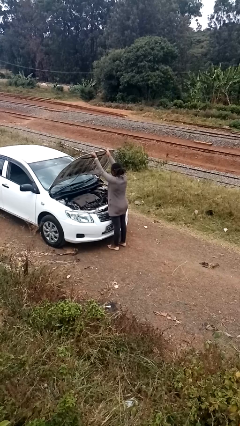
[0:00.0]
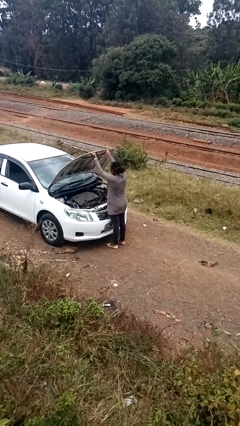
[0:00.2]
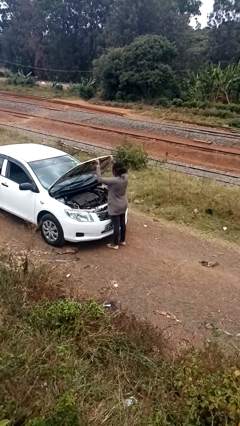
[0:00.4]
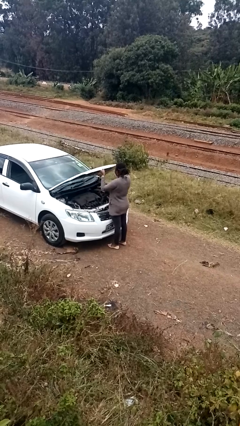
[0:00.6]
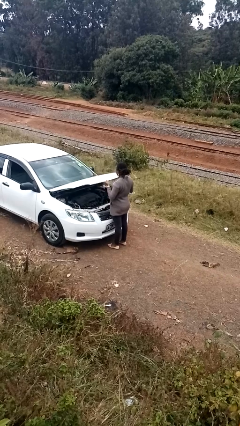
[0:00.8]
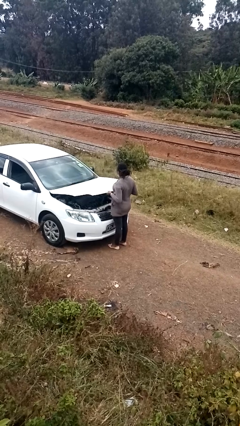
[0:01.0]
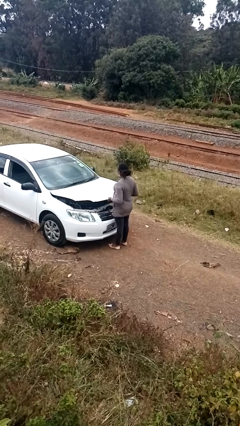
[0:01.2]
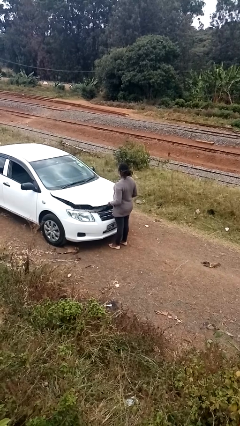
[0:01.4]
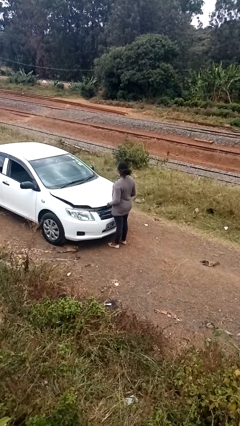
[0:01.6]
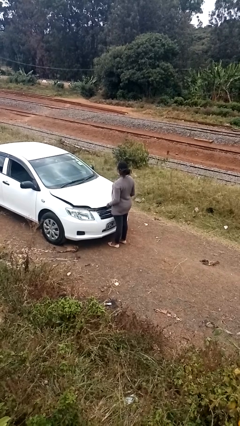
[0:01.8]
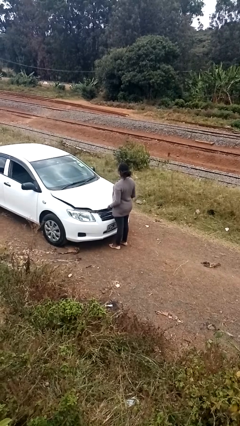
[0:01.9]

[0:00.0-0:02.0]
person closes car hood

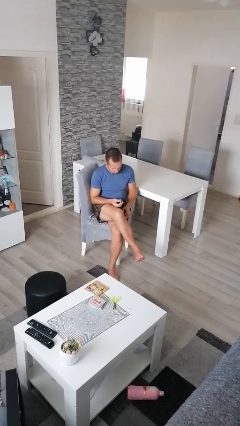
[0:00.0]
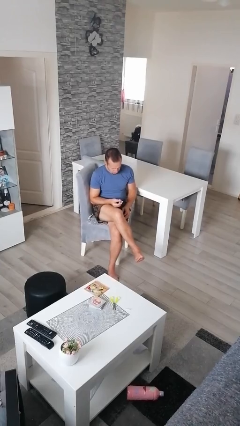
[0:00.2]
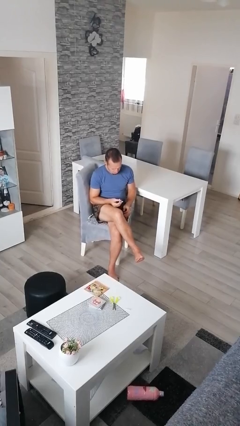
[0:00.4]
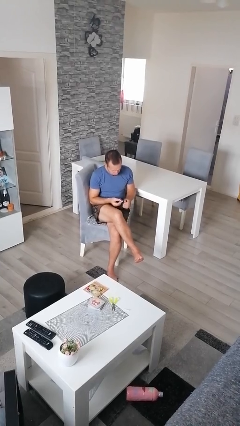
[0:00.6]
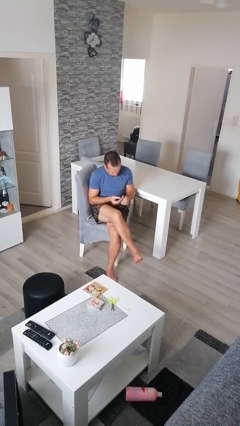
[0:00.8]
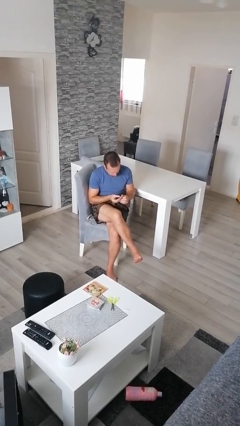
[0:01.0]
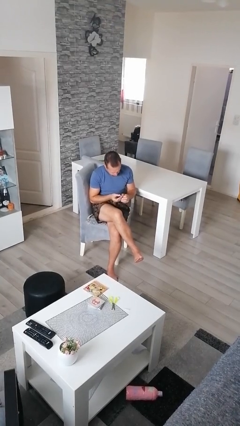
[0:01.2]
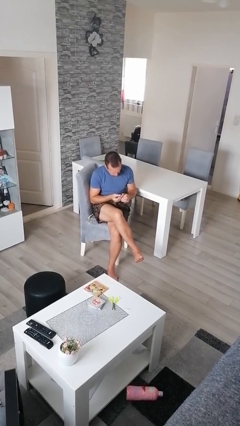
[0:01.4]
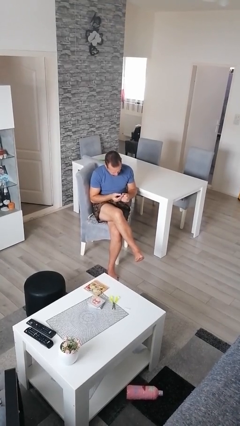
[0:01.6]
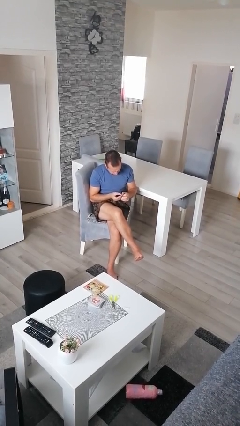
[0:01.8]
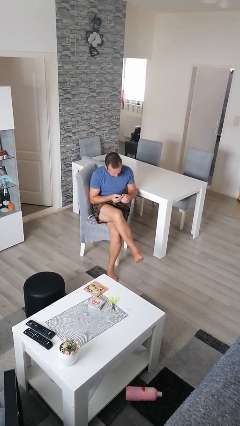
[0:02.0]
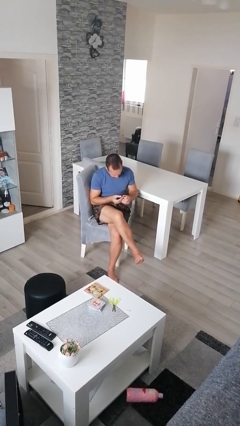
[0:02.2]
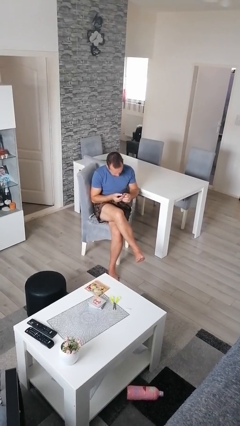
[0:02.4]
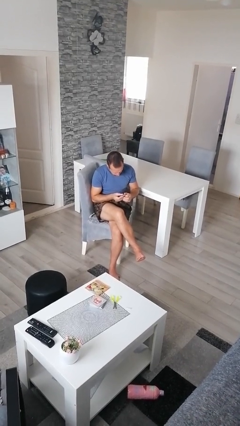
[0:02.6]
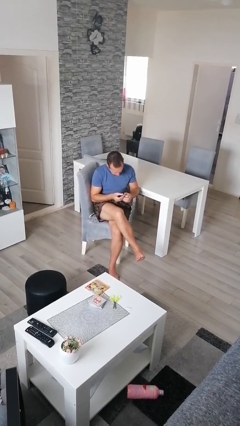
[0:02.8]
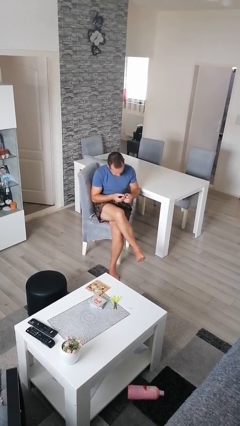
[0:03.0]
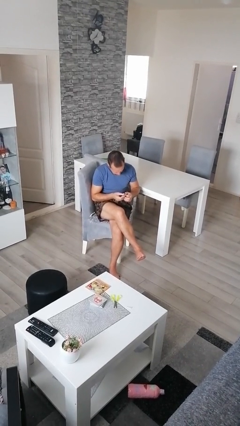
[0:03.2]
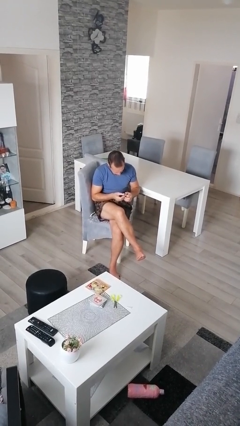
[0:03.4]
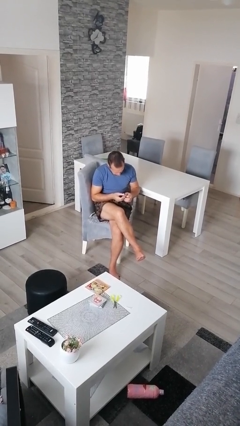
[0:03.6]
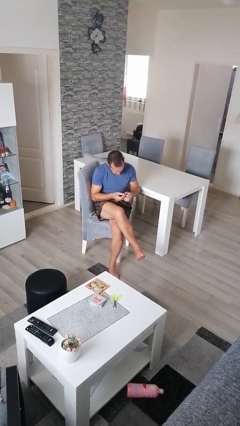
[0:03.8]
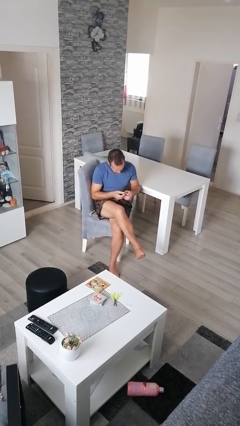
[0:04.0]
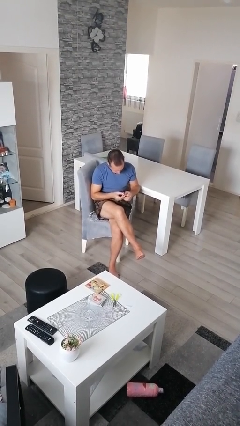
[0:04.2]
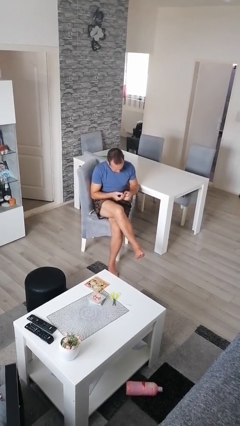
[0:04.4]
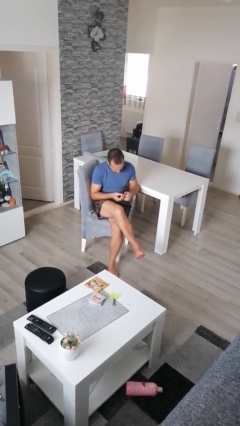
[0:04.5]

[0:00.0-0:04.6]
person clips fingernails

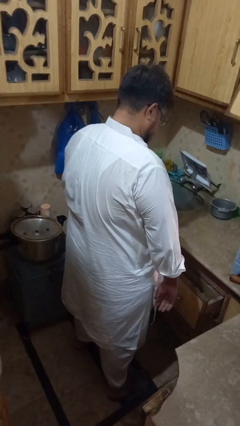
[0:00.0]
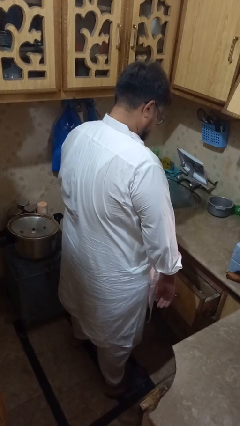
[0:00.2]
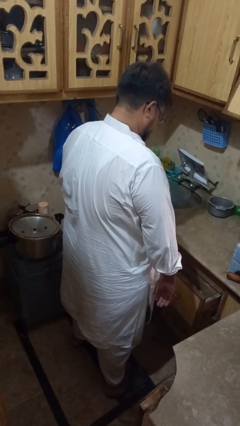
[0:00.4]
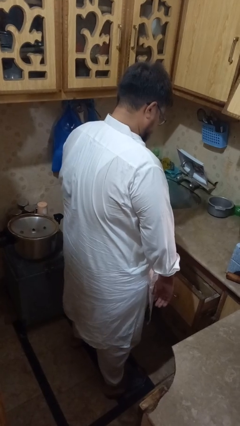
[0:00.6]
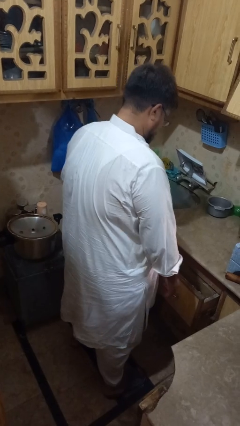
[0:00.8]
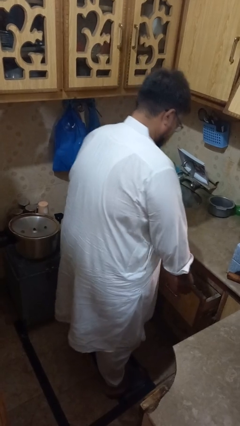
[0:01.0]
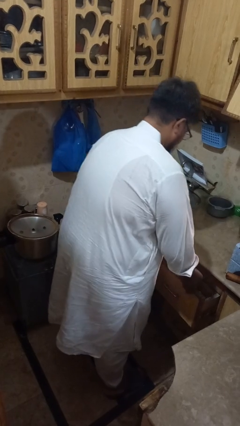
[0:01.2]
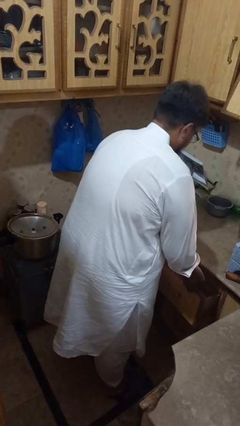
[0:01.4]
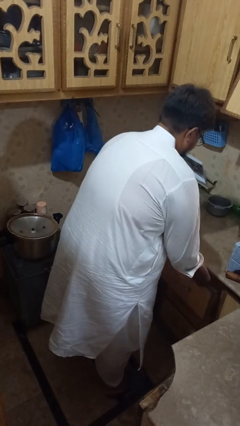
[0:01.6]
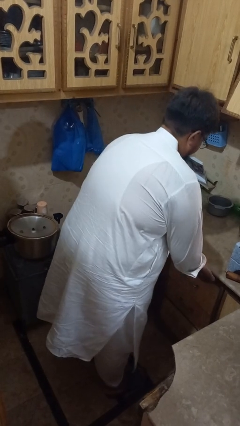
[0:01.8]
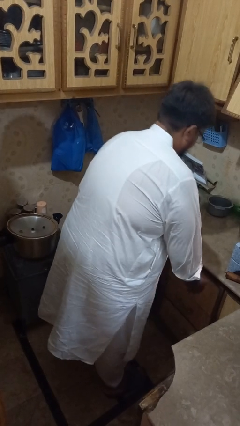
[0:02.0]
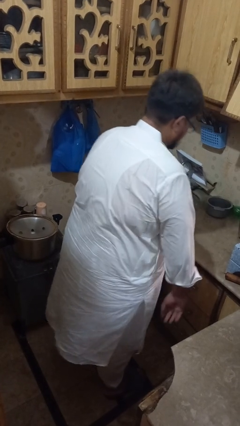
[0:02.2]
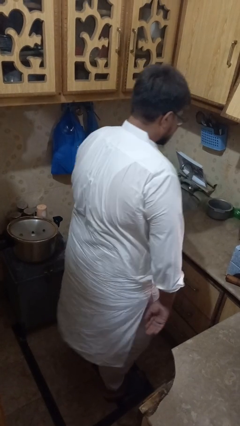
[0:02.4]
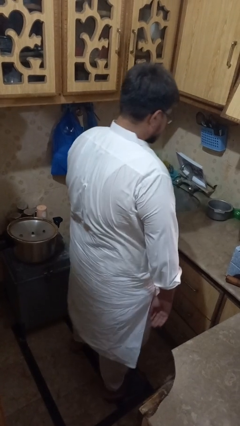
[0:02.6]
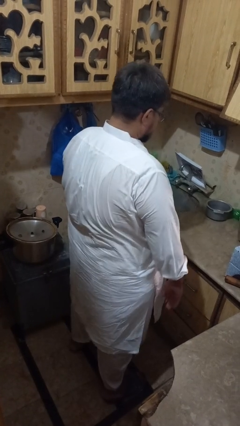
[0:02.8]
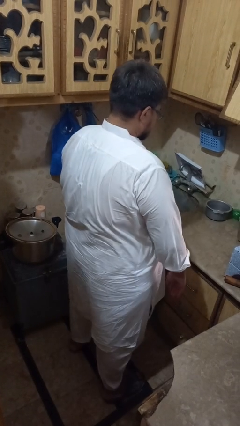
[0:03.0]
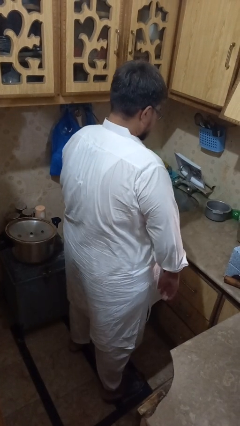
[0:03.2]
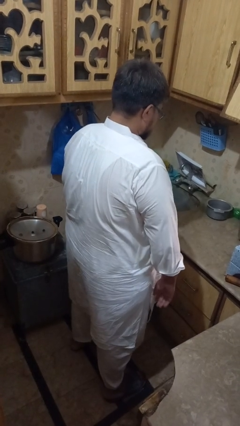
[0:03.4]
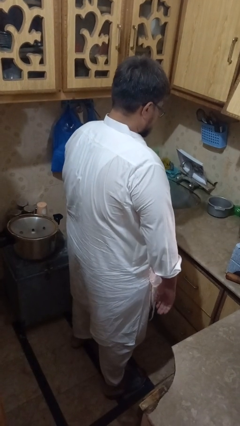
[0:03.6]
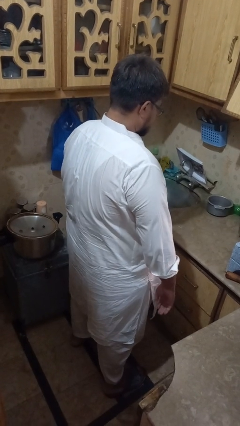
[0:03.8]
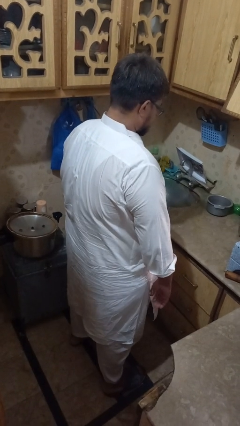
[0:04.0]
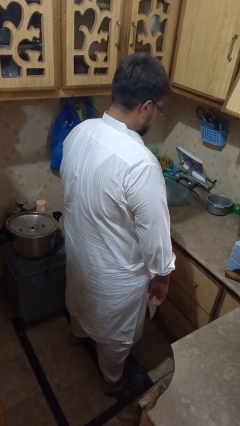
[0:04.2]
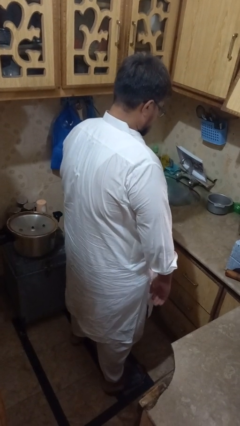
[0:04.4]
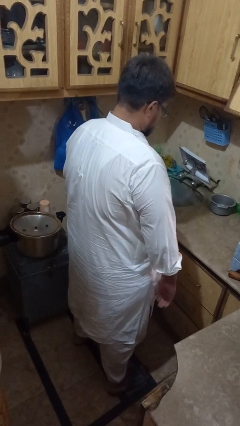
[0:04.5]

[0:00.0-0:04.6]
person closes kitchen drawer

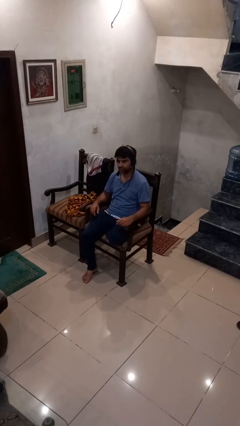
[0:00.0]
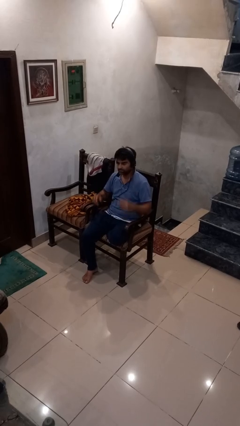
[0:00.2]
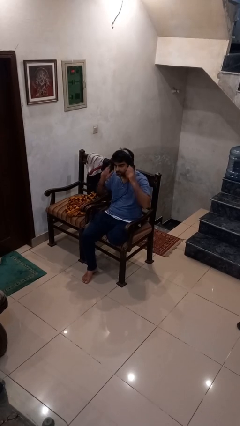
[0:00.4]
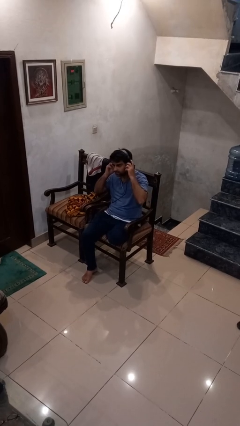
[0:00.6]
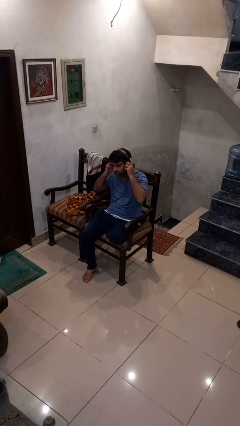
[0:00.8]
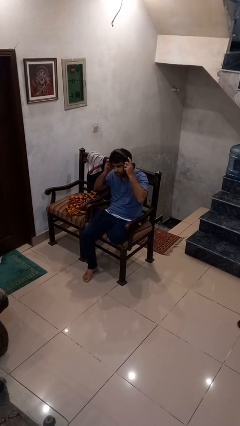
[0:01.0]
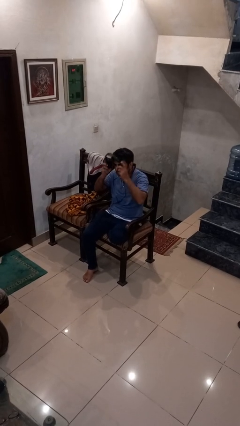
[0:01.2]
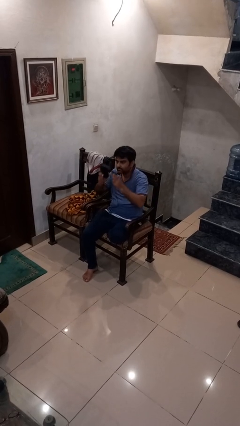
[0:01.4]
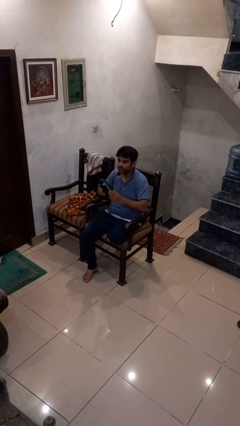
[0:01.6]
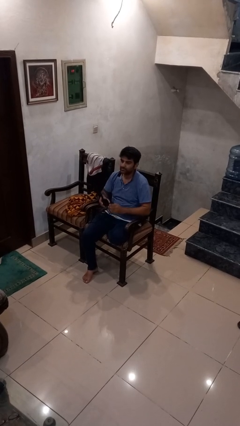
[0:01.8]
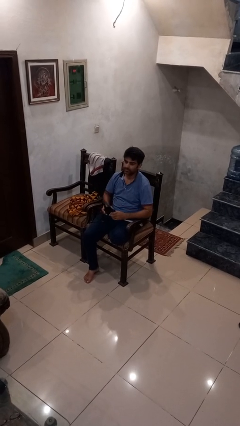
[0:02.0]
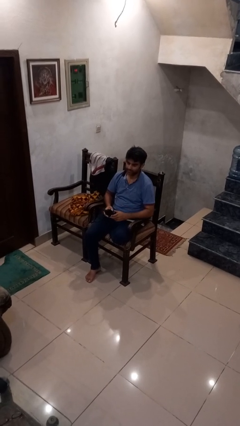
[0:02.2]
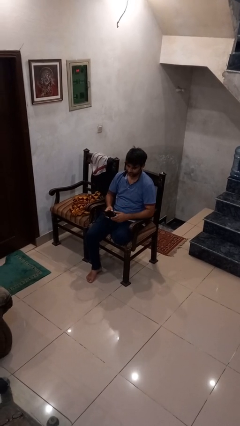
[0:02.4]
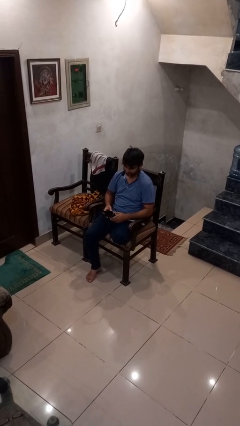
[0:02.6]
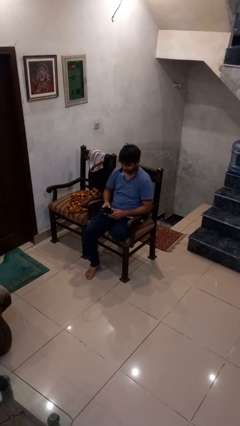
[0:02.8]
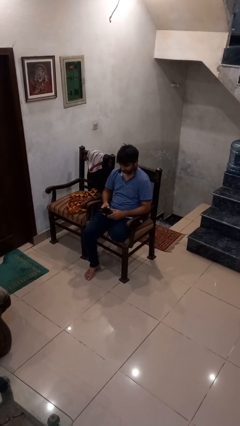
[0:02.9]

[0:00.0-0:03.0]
person takes off headphones

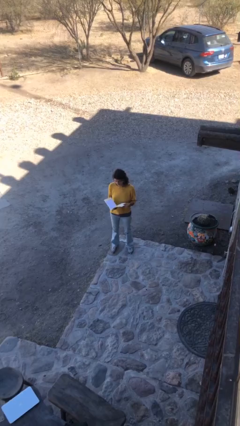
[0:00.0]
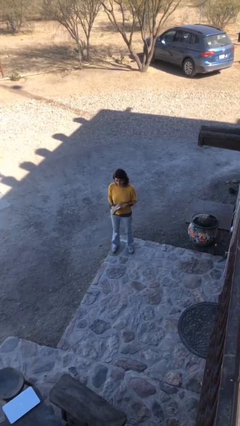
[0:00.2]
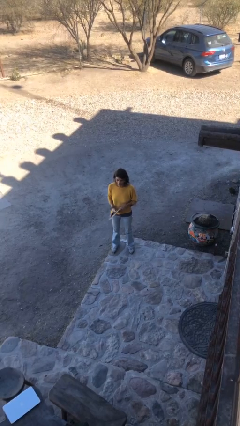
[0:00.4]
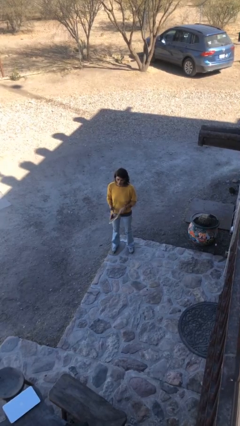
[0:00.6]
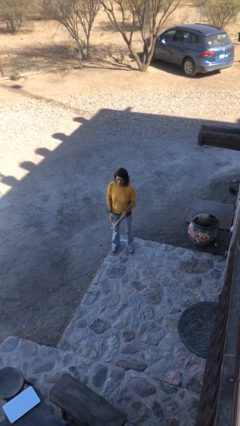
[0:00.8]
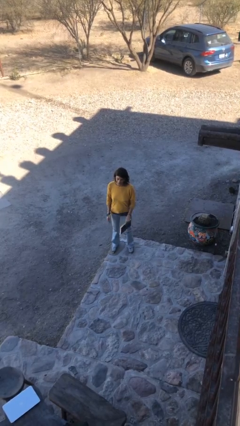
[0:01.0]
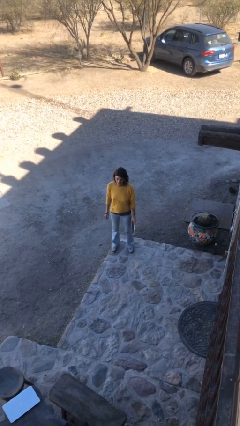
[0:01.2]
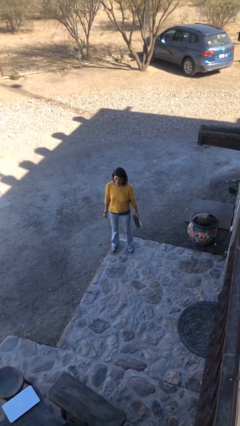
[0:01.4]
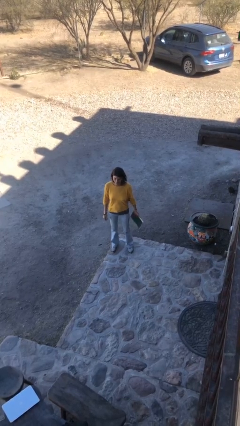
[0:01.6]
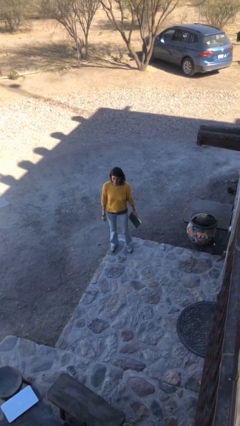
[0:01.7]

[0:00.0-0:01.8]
person reads document

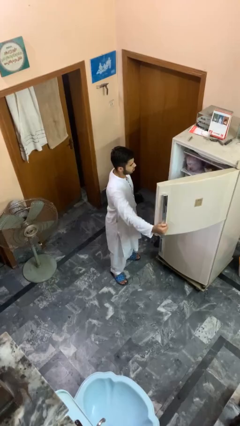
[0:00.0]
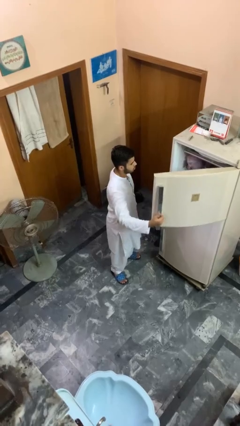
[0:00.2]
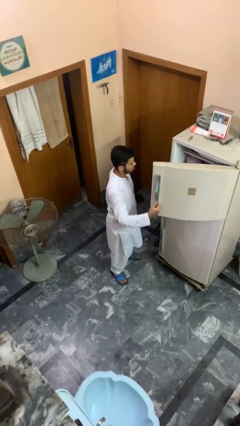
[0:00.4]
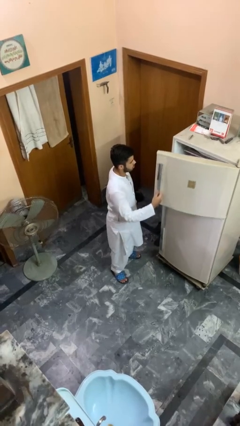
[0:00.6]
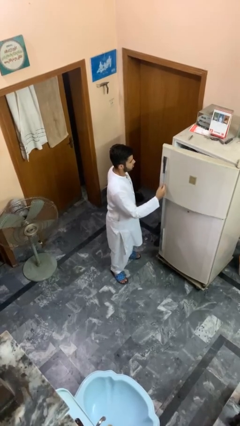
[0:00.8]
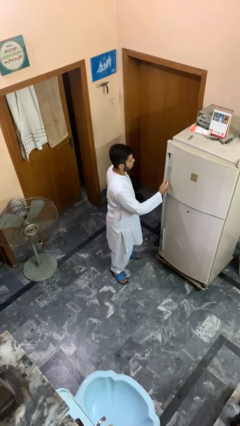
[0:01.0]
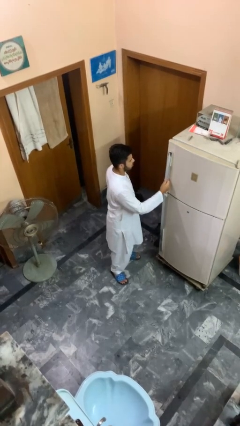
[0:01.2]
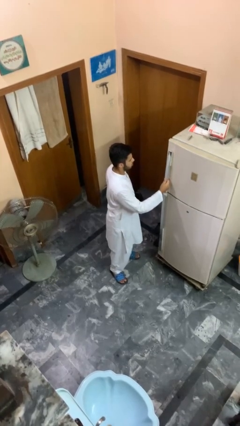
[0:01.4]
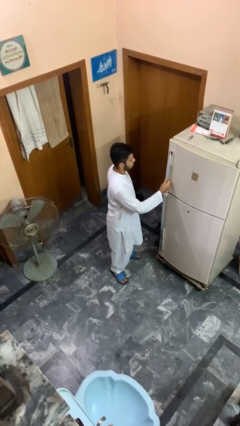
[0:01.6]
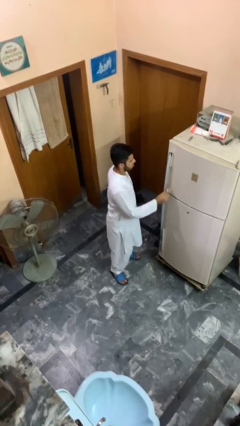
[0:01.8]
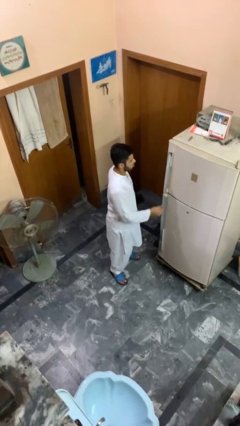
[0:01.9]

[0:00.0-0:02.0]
person closes refrigerator
